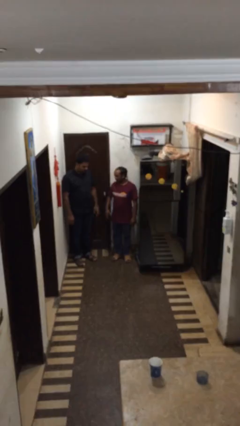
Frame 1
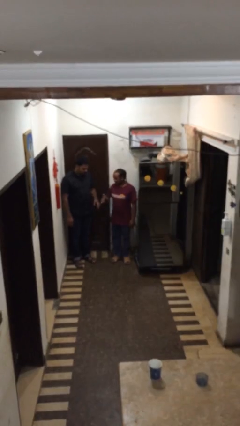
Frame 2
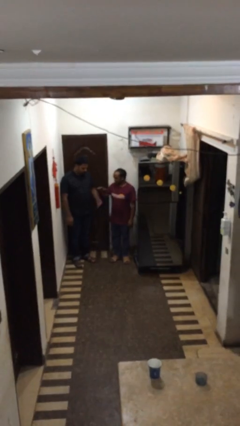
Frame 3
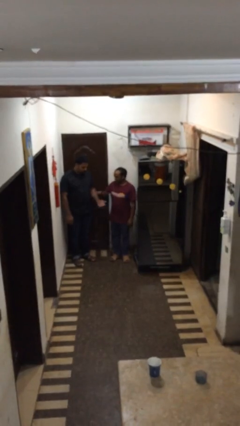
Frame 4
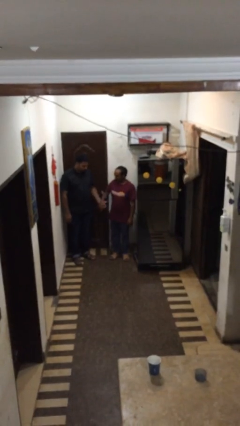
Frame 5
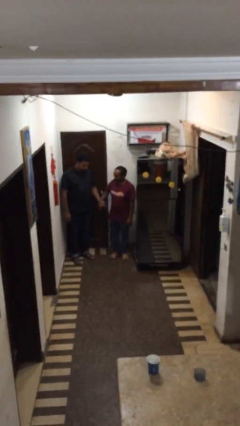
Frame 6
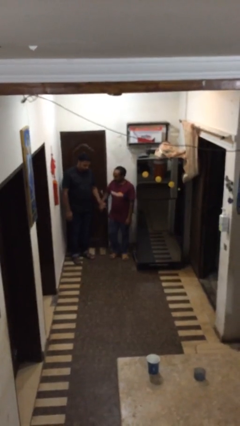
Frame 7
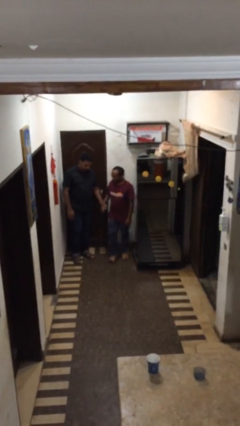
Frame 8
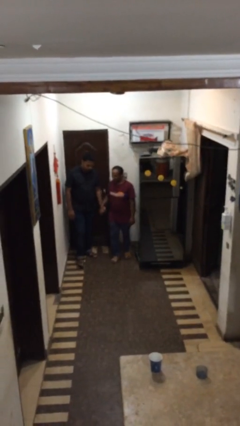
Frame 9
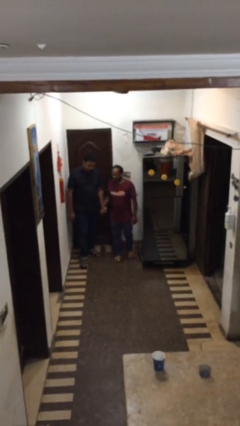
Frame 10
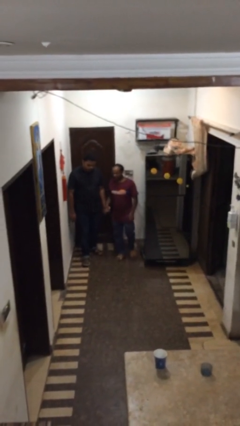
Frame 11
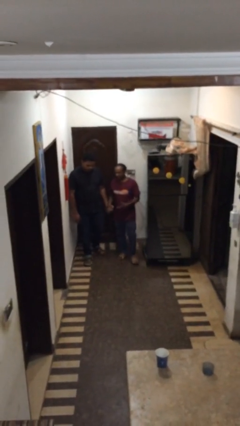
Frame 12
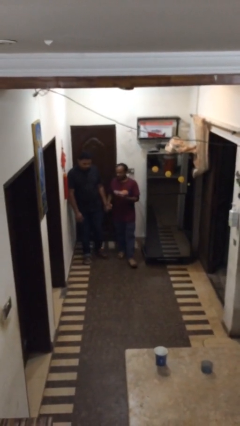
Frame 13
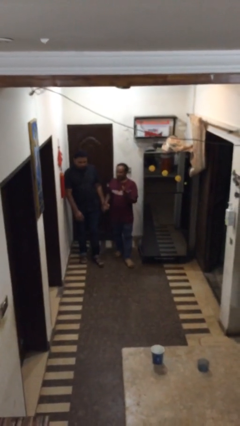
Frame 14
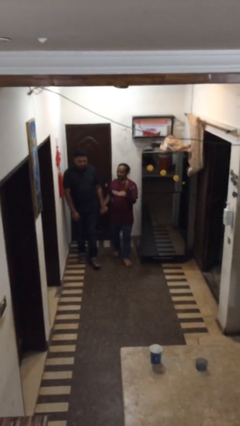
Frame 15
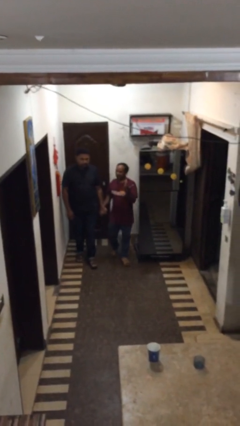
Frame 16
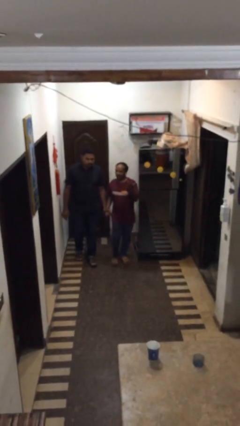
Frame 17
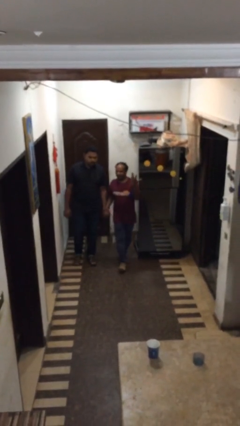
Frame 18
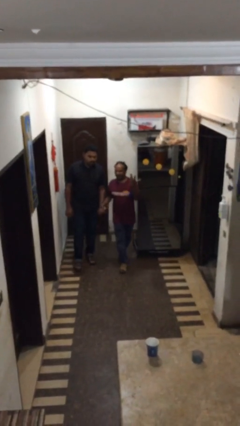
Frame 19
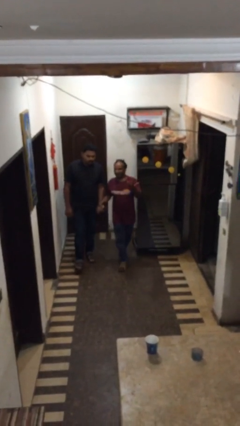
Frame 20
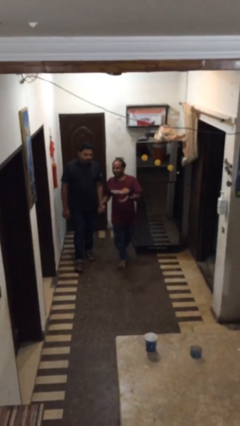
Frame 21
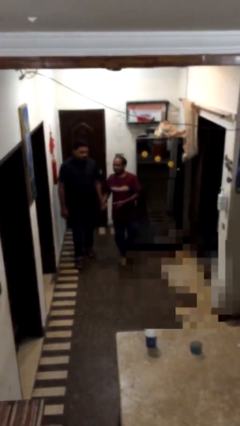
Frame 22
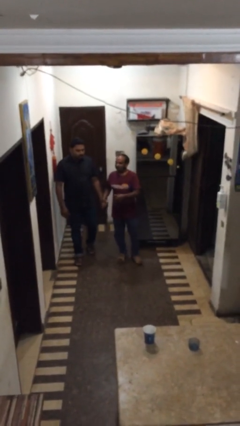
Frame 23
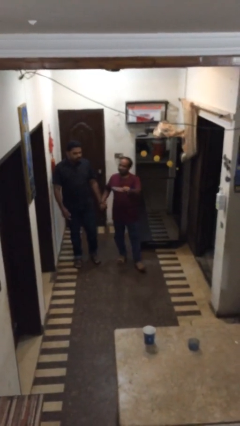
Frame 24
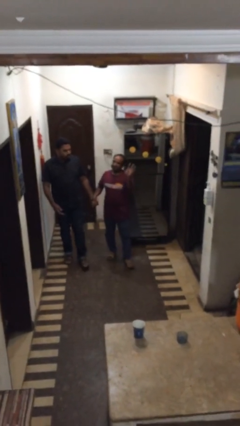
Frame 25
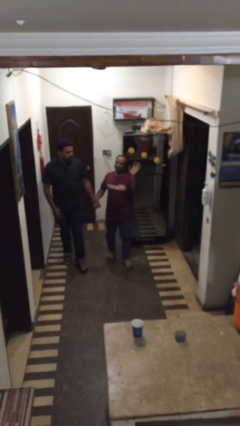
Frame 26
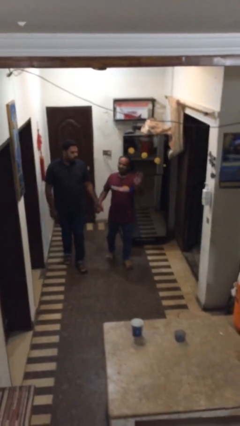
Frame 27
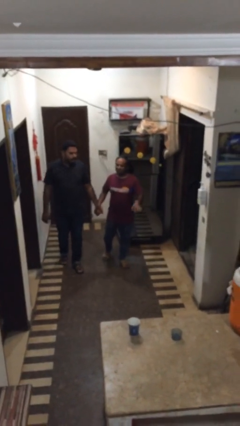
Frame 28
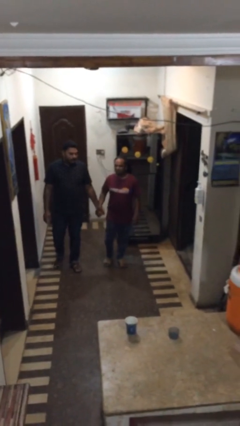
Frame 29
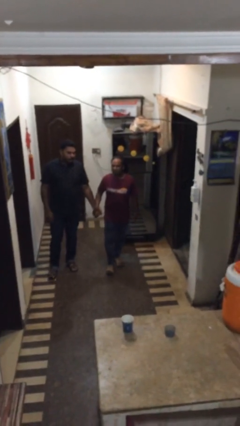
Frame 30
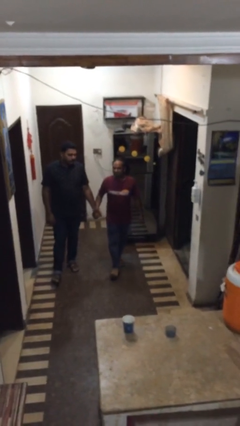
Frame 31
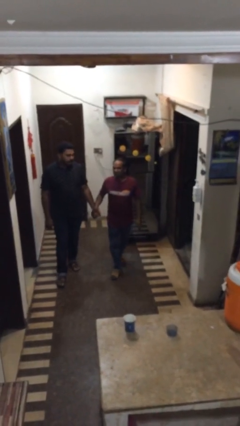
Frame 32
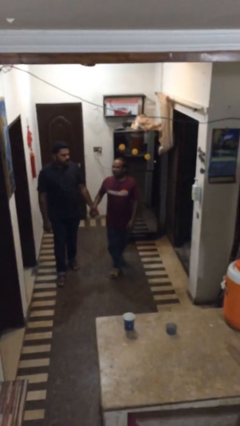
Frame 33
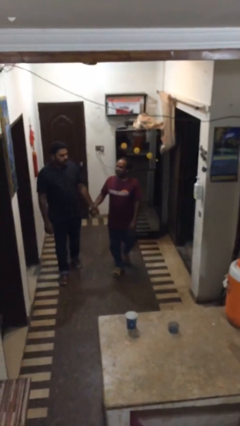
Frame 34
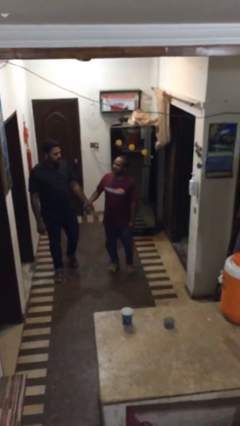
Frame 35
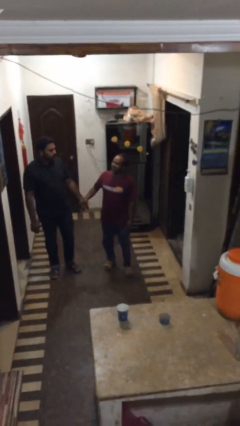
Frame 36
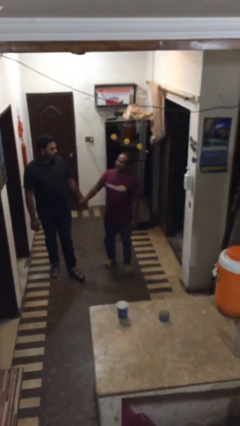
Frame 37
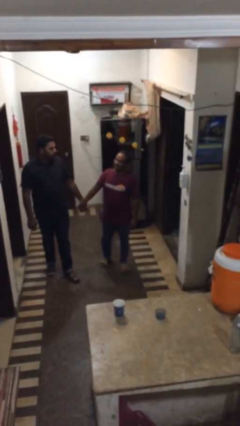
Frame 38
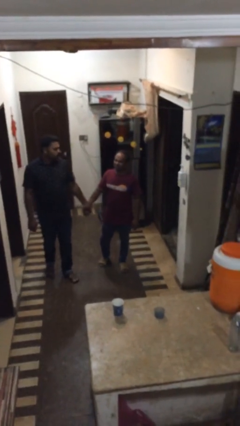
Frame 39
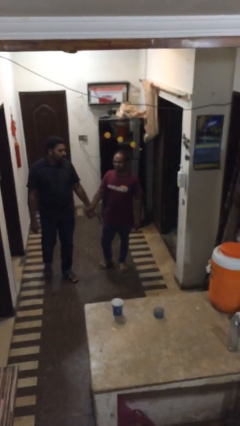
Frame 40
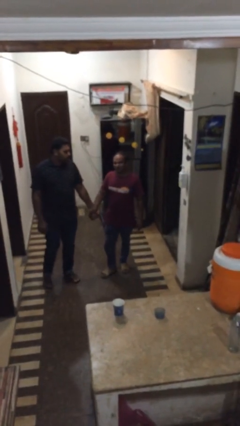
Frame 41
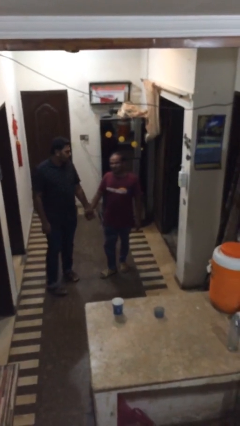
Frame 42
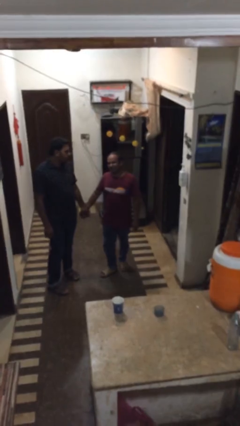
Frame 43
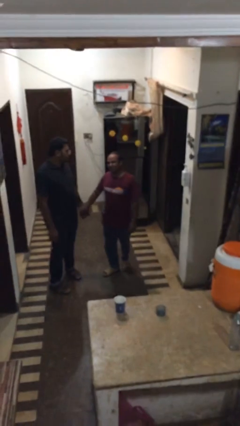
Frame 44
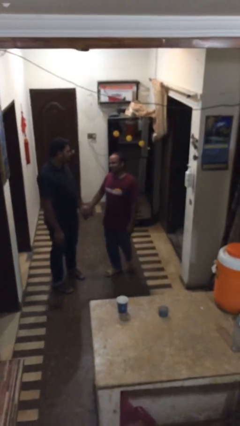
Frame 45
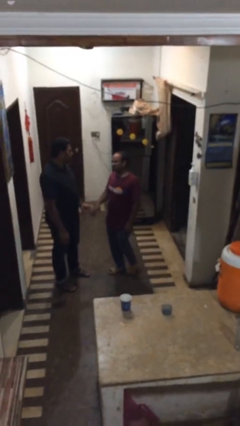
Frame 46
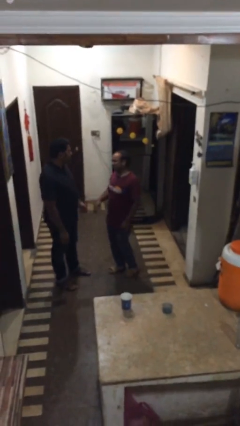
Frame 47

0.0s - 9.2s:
person holds hand

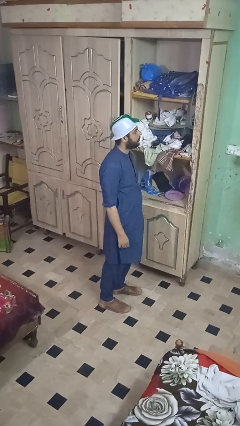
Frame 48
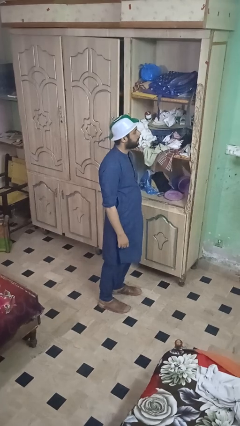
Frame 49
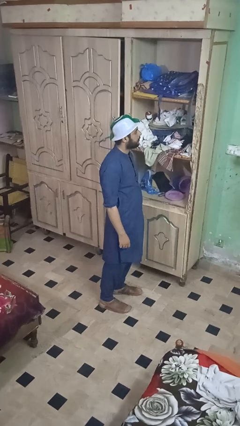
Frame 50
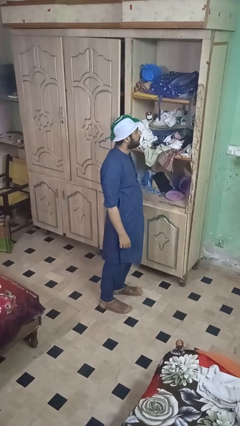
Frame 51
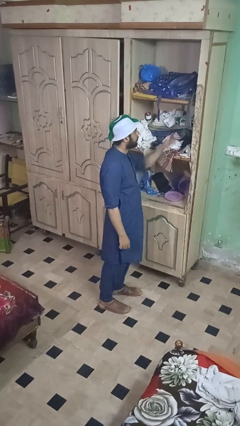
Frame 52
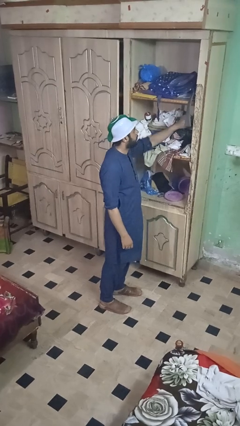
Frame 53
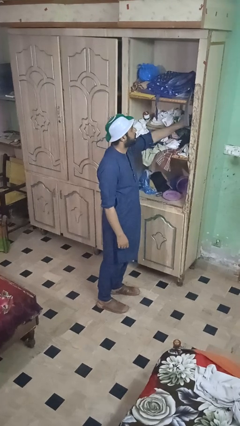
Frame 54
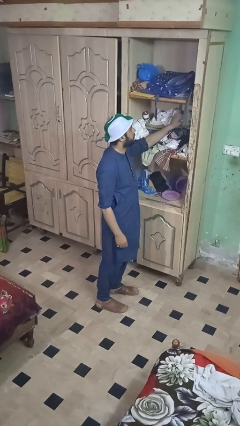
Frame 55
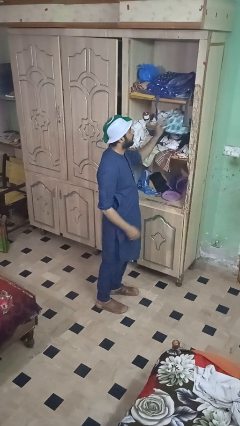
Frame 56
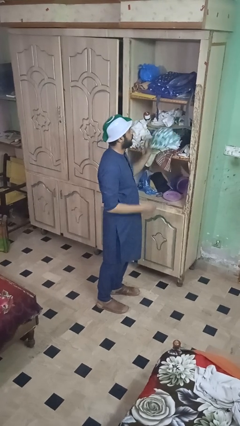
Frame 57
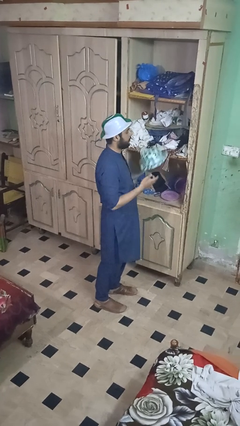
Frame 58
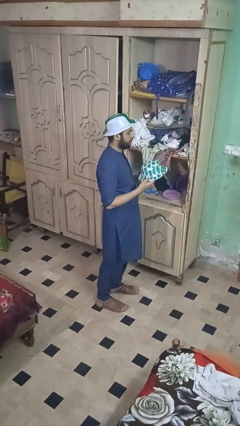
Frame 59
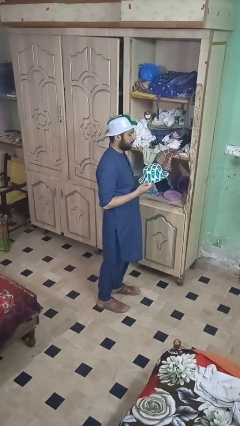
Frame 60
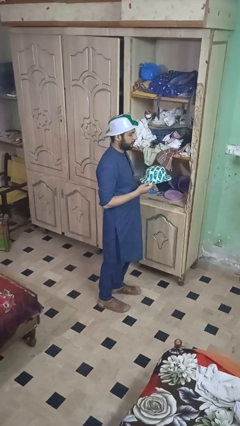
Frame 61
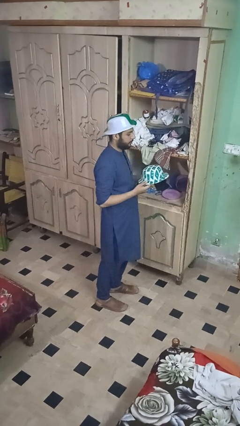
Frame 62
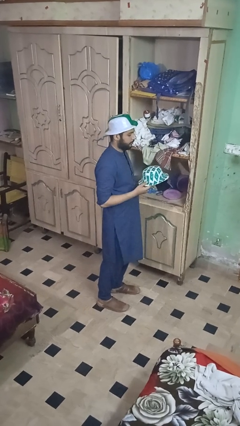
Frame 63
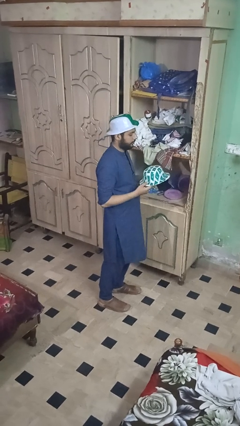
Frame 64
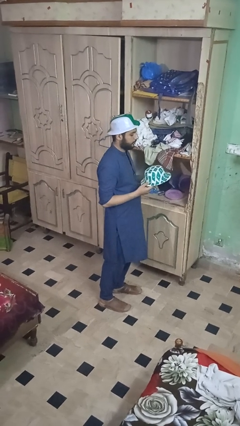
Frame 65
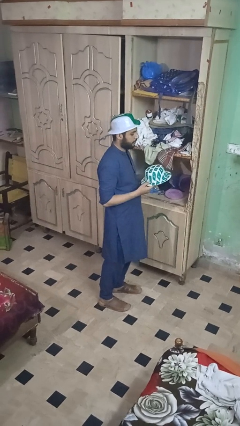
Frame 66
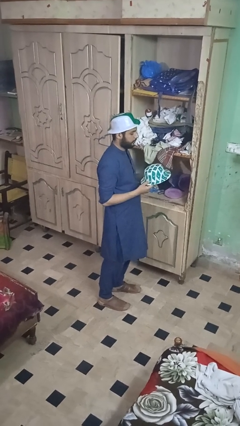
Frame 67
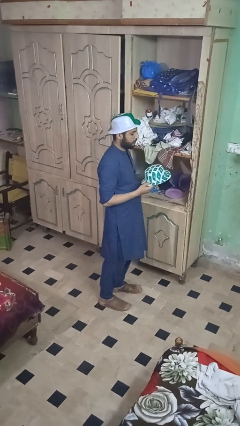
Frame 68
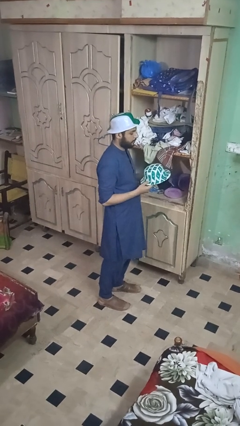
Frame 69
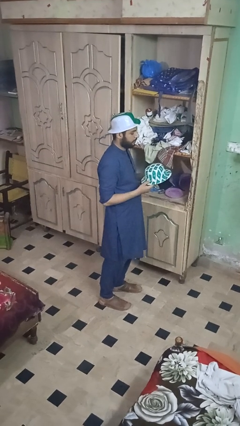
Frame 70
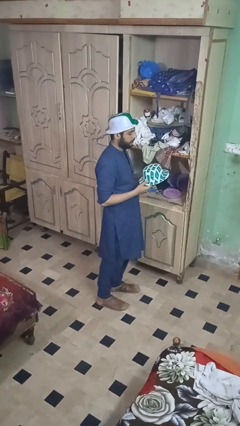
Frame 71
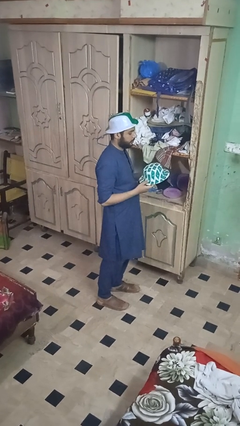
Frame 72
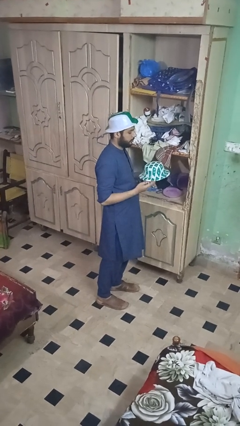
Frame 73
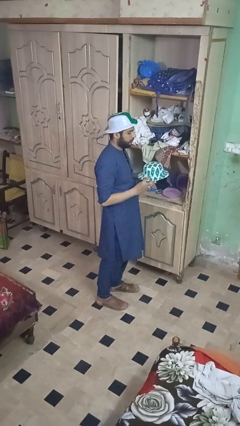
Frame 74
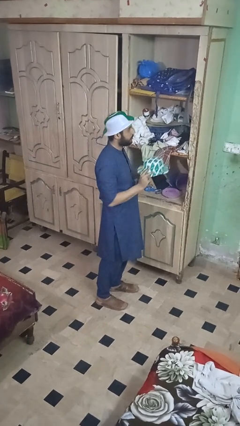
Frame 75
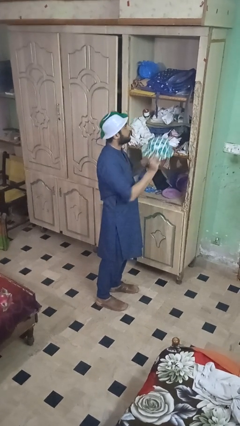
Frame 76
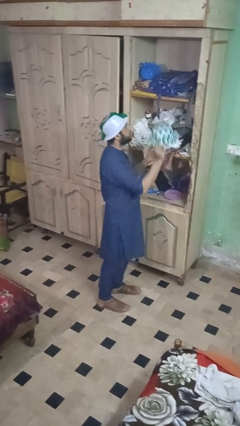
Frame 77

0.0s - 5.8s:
person picks up object from shelf

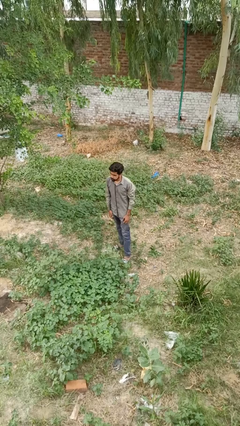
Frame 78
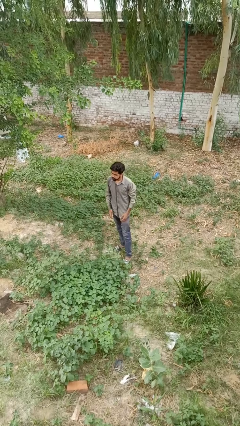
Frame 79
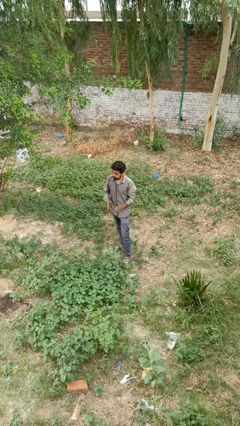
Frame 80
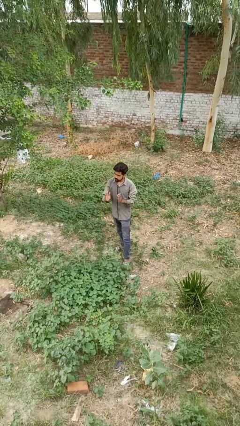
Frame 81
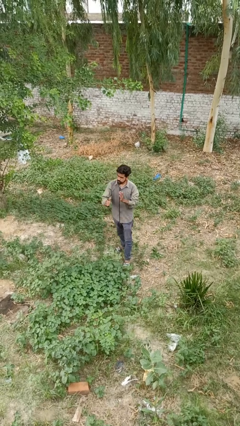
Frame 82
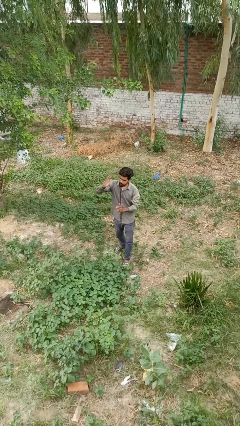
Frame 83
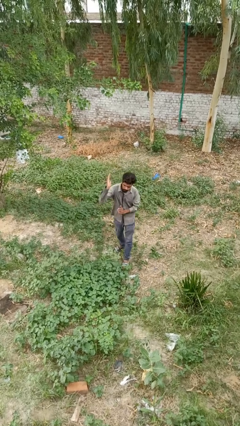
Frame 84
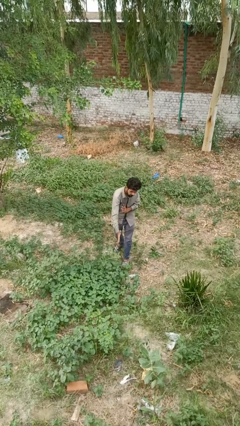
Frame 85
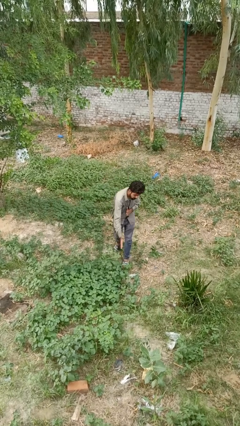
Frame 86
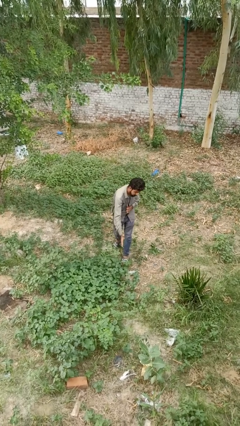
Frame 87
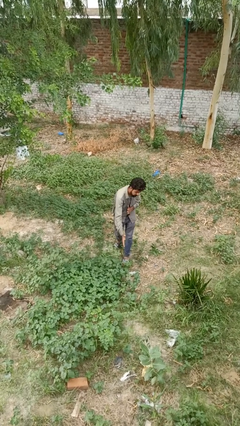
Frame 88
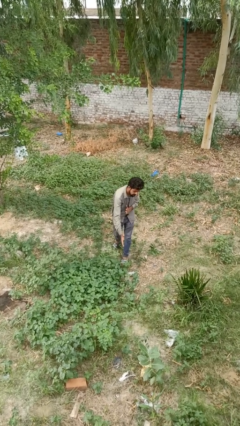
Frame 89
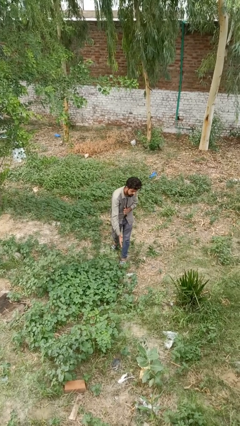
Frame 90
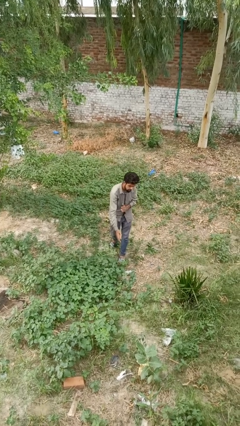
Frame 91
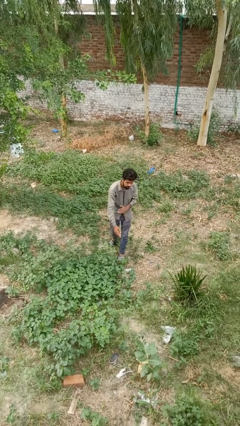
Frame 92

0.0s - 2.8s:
person karate chop
